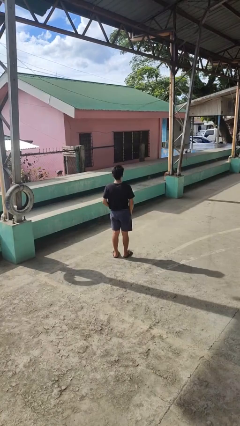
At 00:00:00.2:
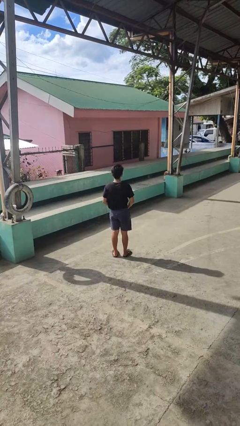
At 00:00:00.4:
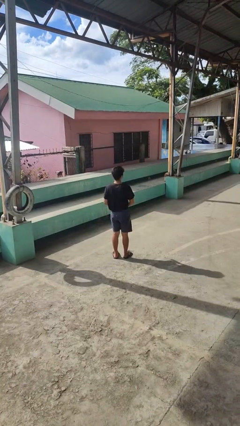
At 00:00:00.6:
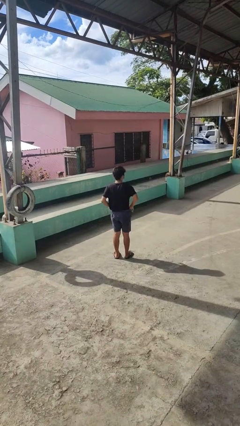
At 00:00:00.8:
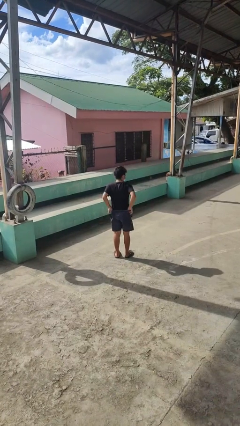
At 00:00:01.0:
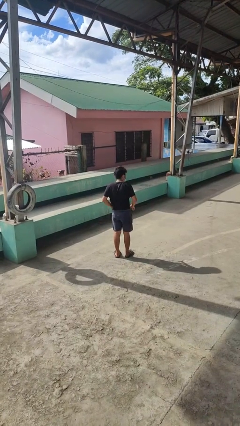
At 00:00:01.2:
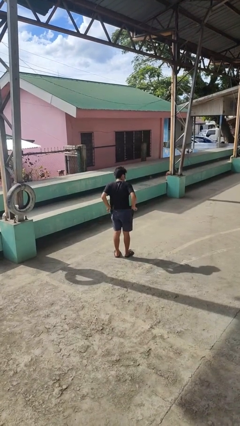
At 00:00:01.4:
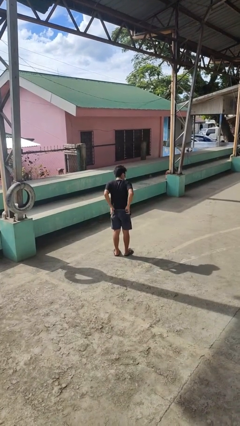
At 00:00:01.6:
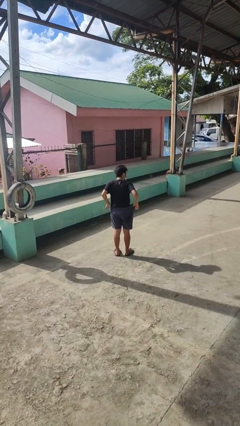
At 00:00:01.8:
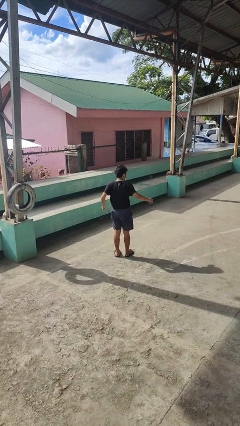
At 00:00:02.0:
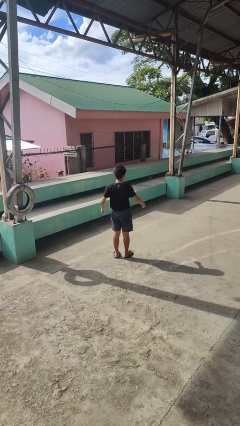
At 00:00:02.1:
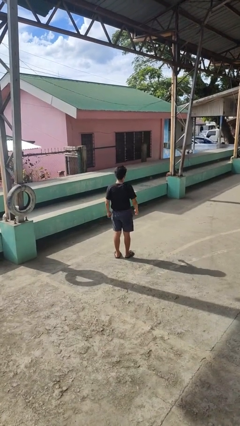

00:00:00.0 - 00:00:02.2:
person hikes up pants

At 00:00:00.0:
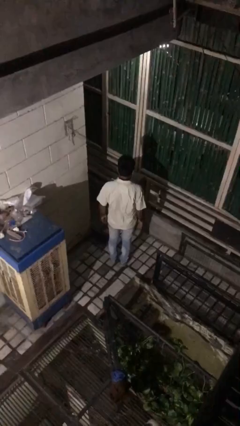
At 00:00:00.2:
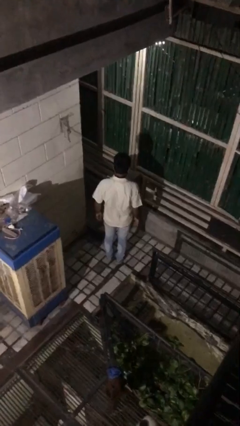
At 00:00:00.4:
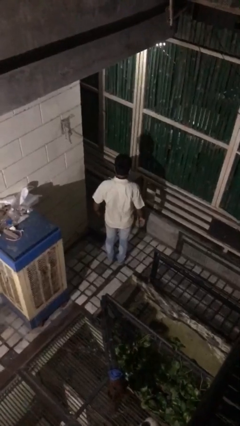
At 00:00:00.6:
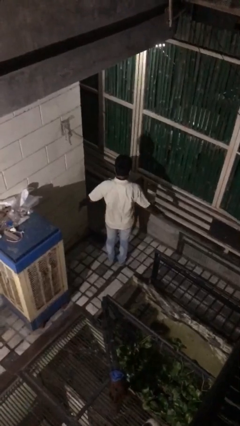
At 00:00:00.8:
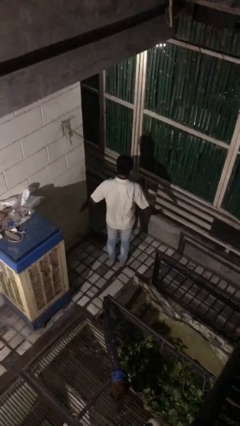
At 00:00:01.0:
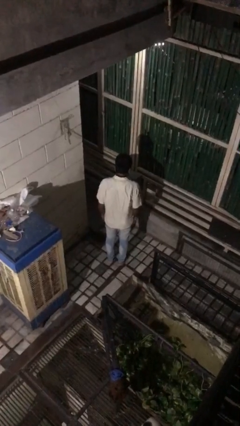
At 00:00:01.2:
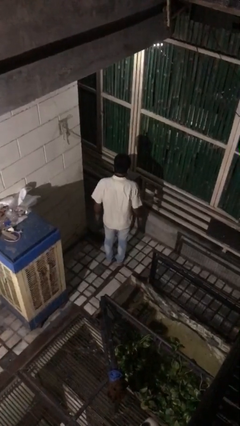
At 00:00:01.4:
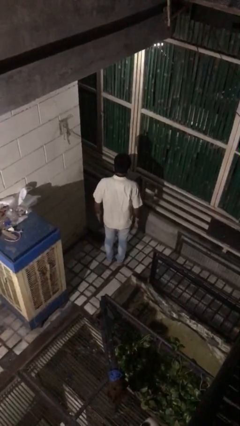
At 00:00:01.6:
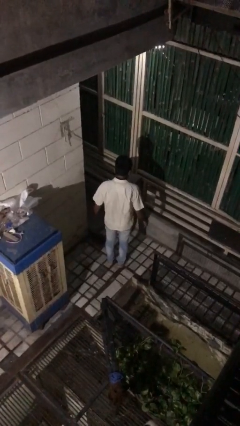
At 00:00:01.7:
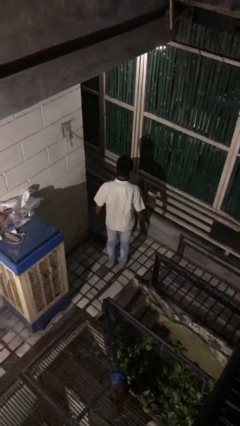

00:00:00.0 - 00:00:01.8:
person slaps hands on thighs

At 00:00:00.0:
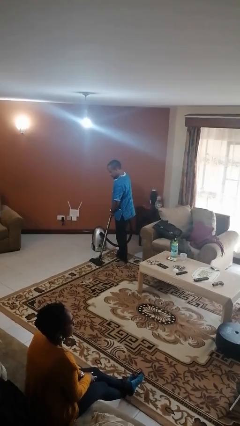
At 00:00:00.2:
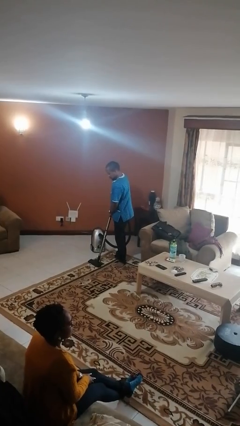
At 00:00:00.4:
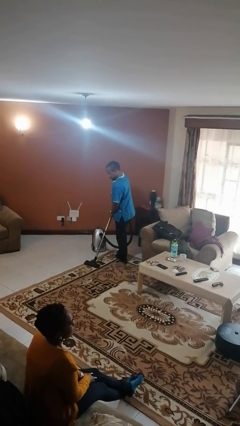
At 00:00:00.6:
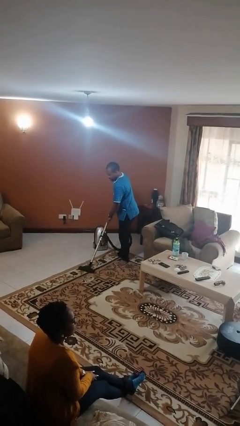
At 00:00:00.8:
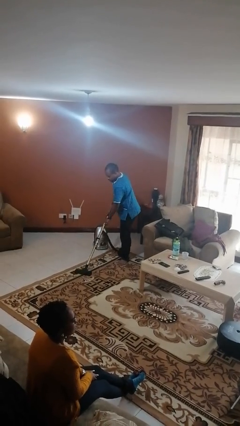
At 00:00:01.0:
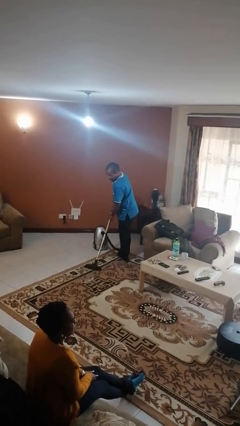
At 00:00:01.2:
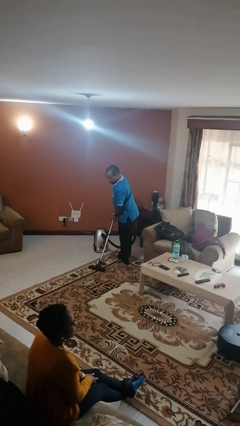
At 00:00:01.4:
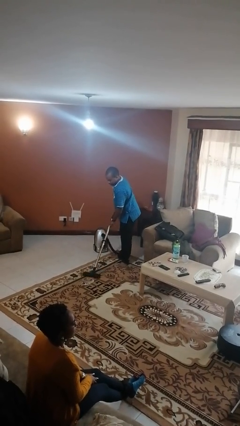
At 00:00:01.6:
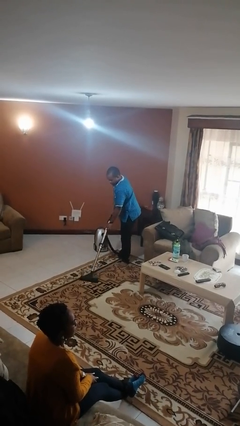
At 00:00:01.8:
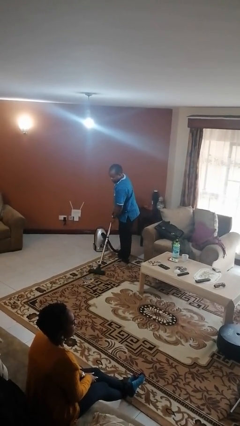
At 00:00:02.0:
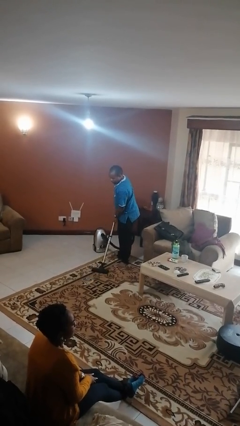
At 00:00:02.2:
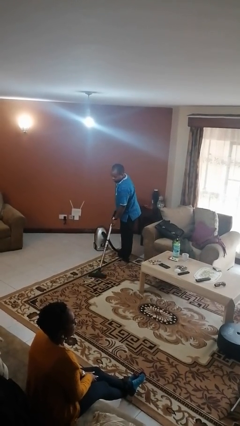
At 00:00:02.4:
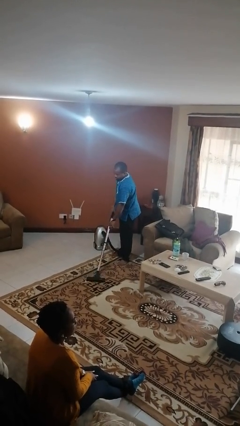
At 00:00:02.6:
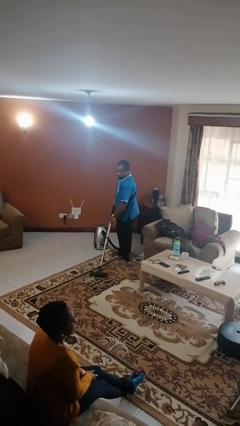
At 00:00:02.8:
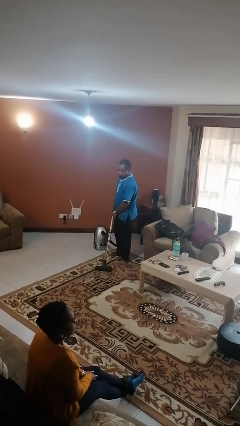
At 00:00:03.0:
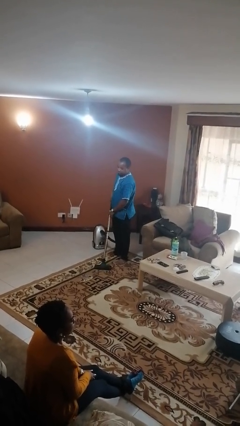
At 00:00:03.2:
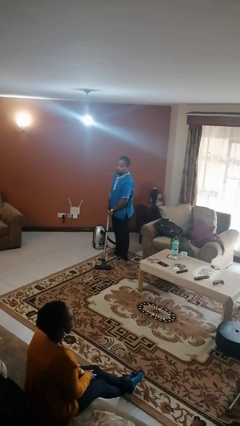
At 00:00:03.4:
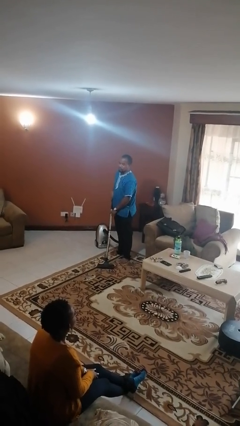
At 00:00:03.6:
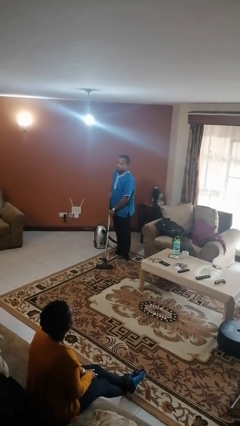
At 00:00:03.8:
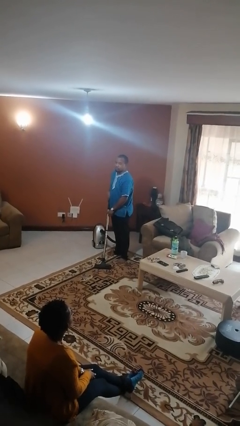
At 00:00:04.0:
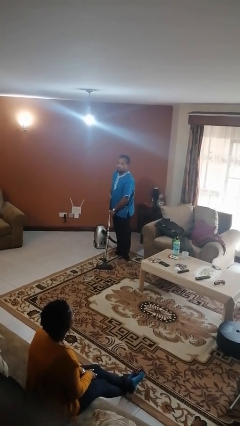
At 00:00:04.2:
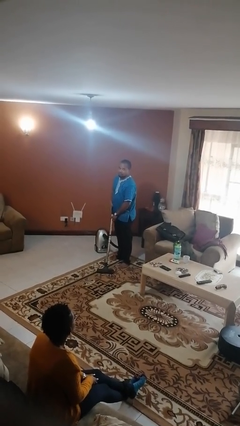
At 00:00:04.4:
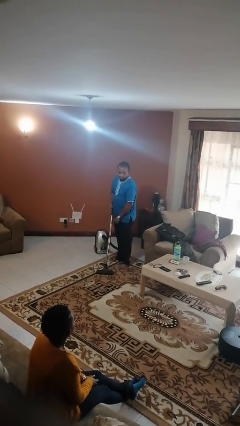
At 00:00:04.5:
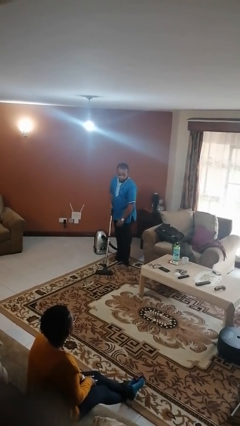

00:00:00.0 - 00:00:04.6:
person vacuums carpet

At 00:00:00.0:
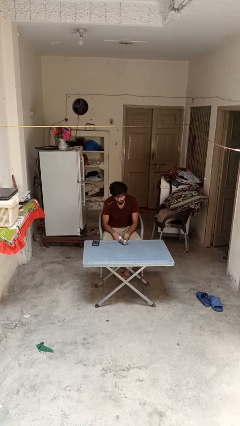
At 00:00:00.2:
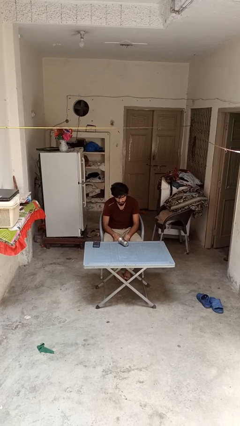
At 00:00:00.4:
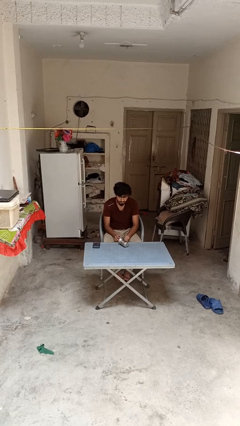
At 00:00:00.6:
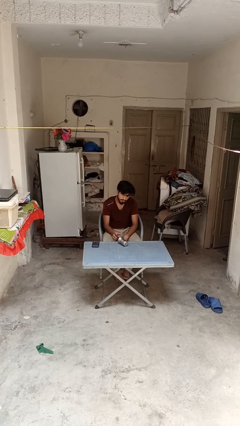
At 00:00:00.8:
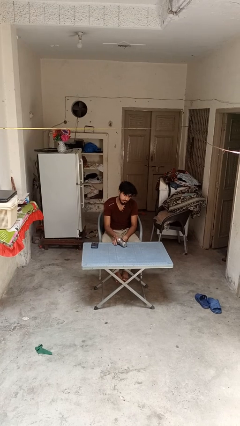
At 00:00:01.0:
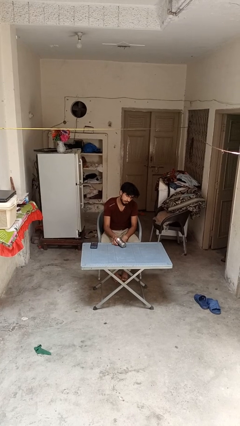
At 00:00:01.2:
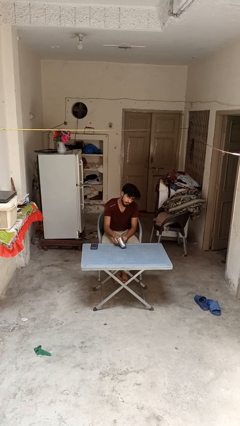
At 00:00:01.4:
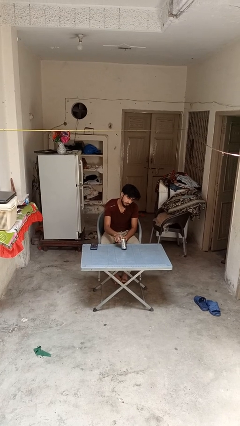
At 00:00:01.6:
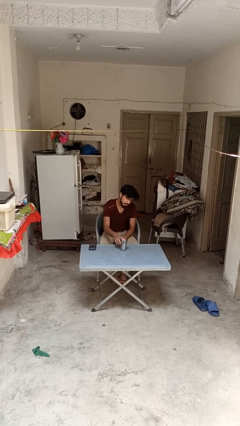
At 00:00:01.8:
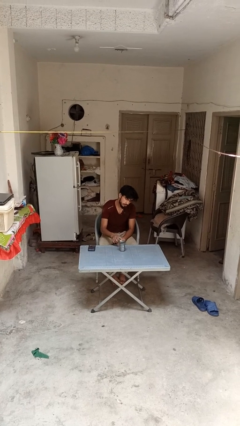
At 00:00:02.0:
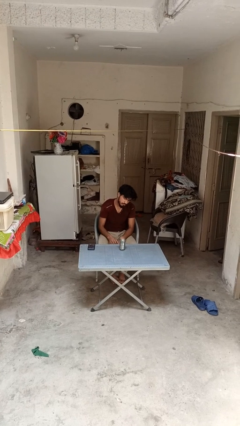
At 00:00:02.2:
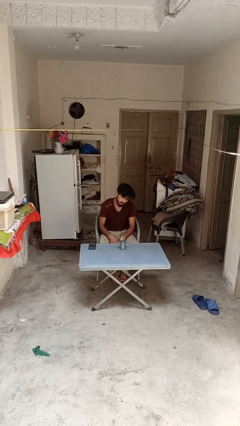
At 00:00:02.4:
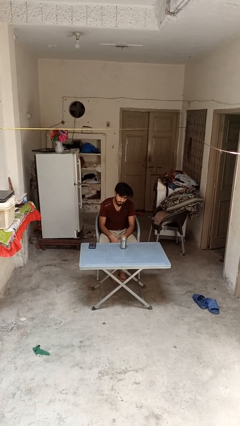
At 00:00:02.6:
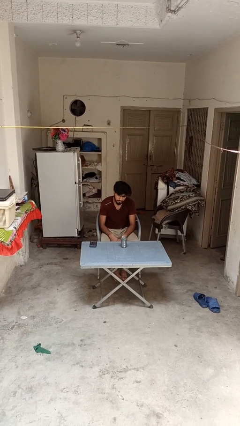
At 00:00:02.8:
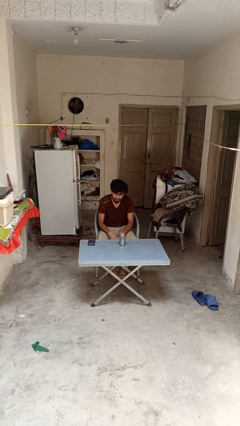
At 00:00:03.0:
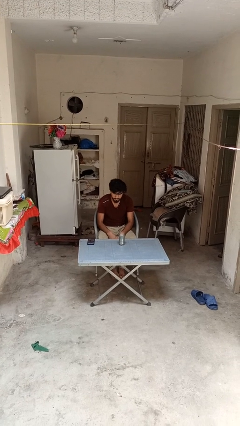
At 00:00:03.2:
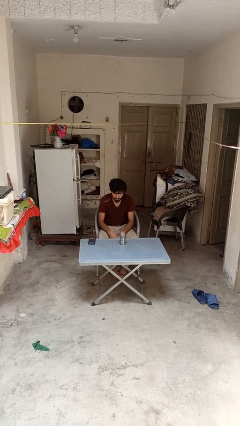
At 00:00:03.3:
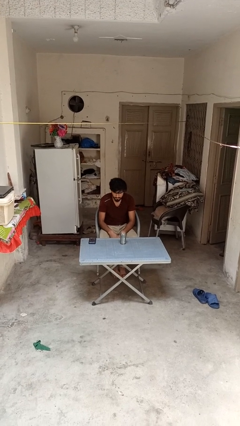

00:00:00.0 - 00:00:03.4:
person sets upright glass

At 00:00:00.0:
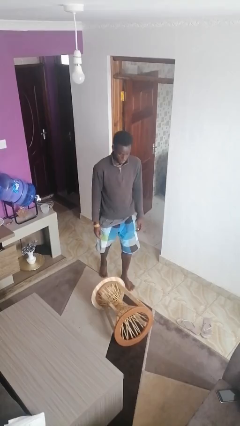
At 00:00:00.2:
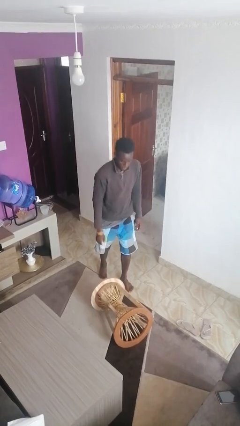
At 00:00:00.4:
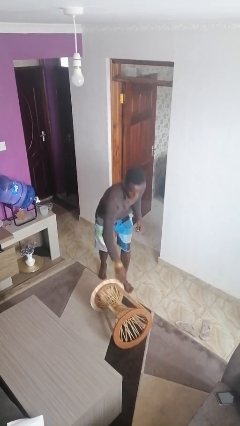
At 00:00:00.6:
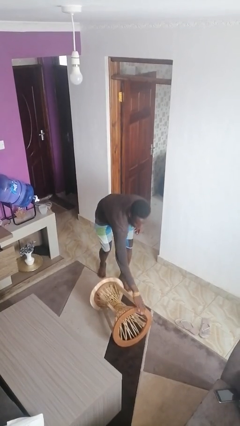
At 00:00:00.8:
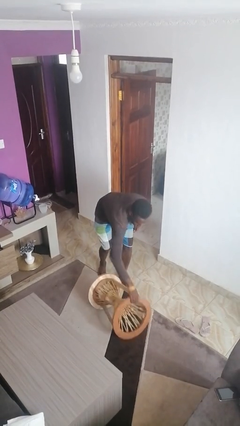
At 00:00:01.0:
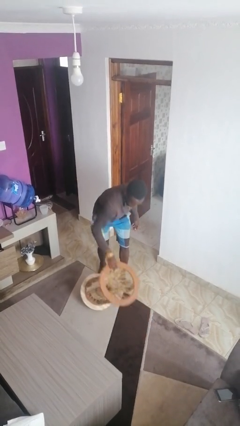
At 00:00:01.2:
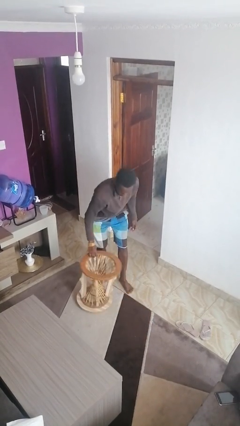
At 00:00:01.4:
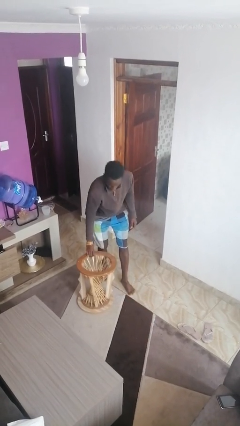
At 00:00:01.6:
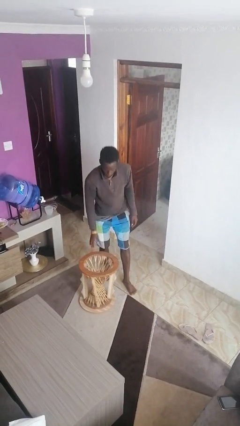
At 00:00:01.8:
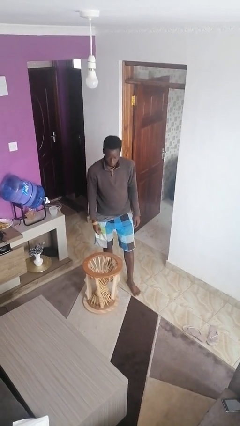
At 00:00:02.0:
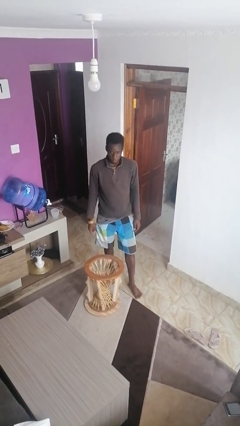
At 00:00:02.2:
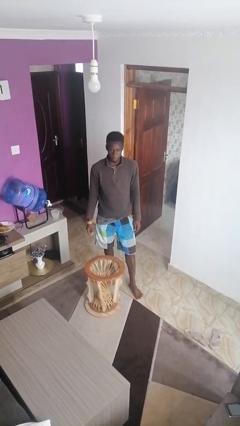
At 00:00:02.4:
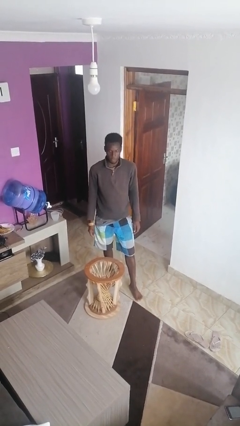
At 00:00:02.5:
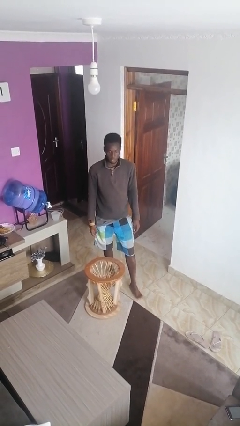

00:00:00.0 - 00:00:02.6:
person sets upright furniture

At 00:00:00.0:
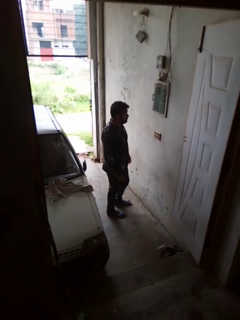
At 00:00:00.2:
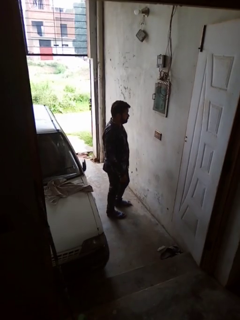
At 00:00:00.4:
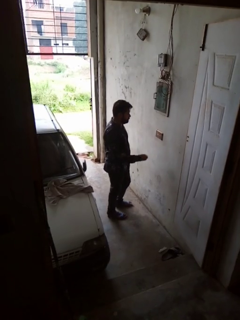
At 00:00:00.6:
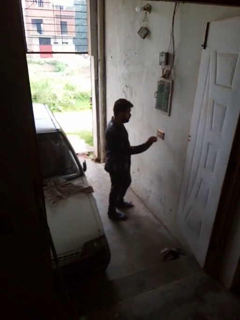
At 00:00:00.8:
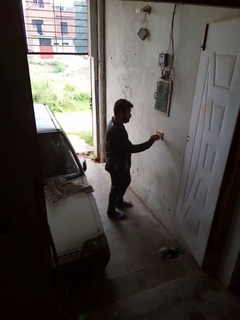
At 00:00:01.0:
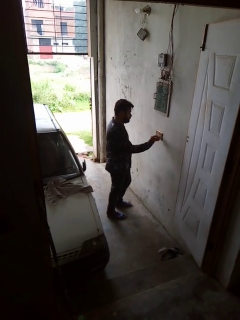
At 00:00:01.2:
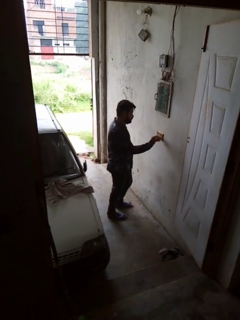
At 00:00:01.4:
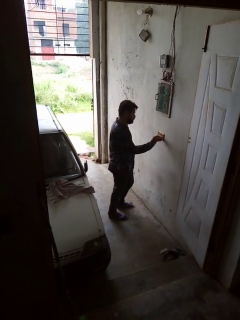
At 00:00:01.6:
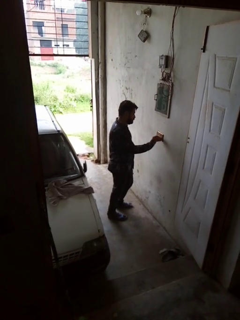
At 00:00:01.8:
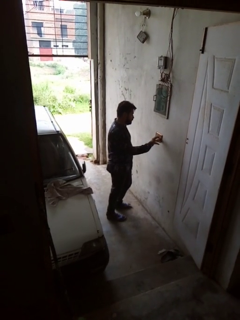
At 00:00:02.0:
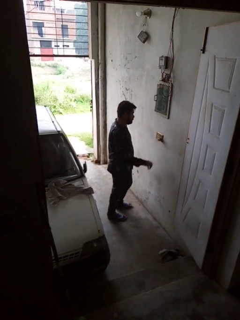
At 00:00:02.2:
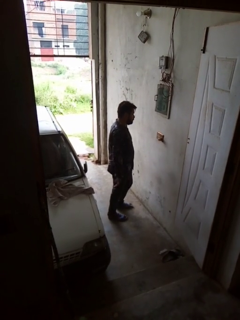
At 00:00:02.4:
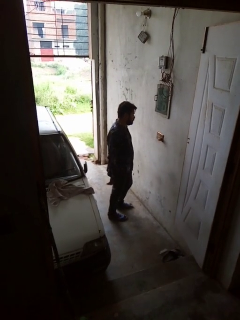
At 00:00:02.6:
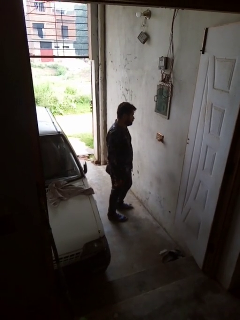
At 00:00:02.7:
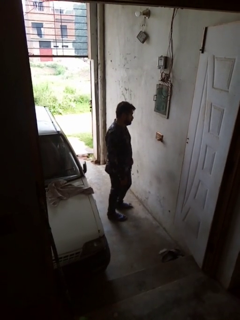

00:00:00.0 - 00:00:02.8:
person plugs into electrical socket

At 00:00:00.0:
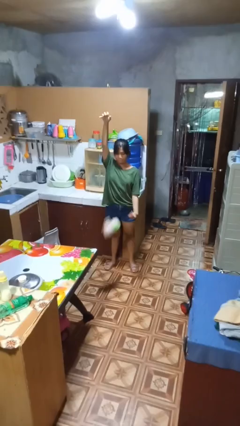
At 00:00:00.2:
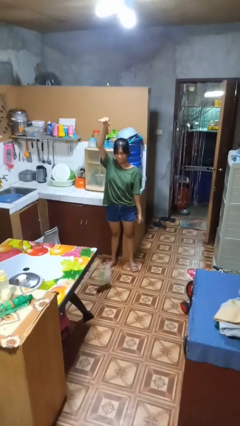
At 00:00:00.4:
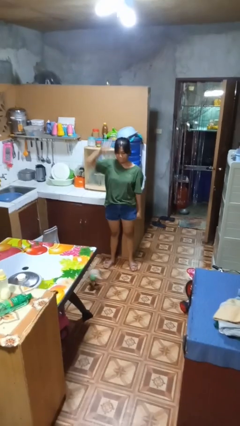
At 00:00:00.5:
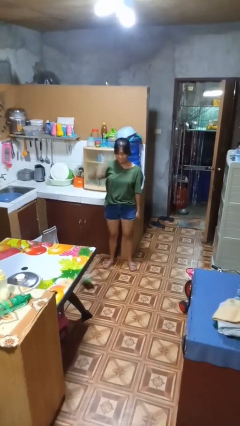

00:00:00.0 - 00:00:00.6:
person catches dropped object
